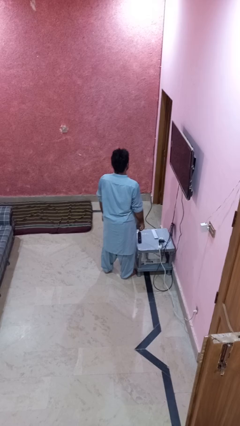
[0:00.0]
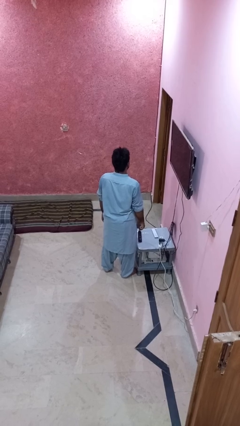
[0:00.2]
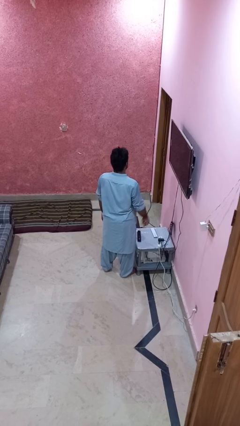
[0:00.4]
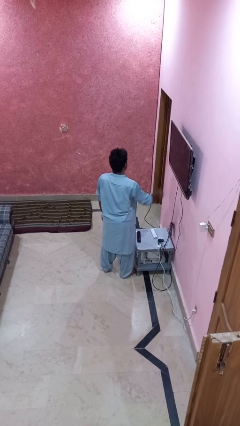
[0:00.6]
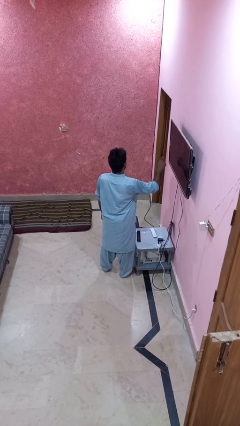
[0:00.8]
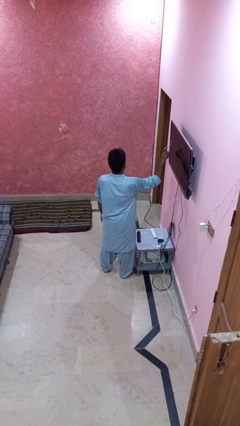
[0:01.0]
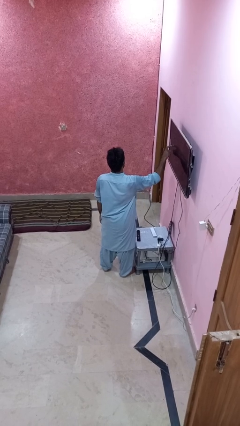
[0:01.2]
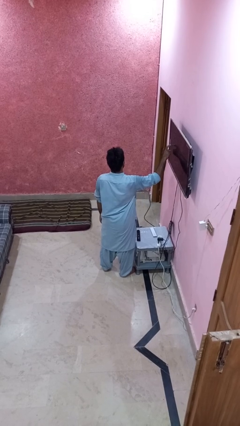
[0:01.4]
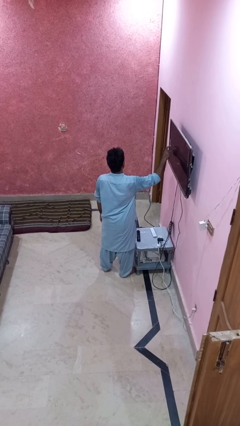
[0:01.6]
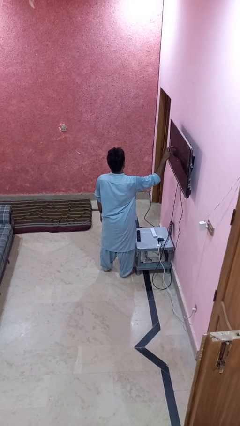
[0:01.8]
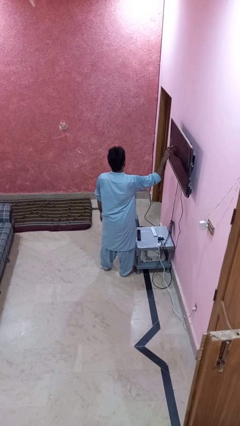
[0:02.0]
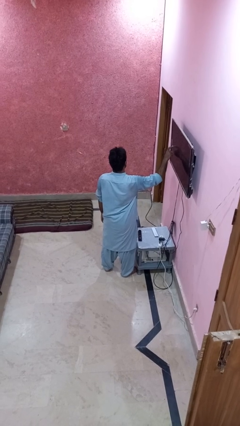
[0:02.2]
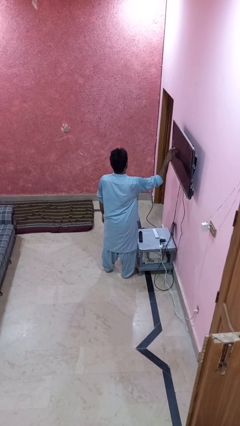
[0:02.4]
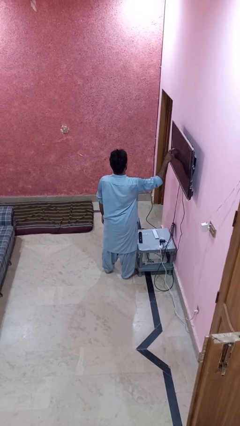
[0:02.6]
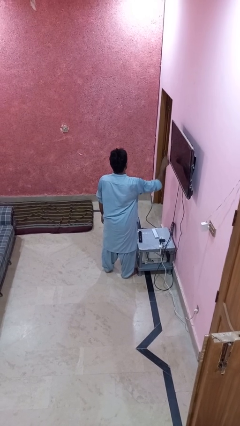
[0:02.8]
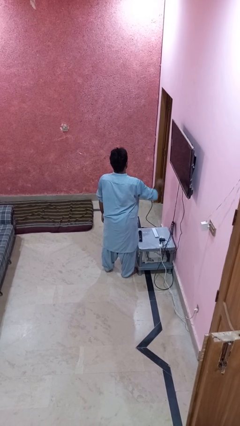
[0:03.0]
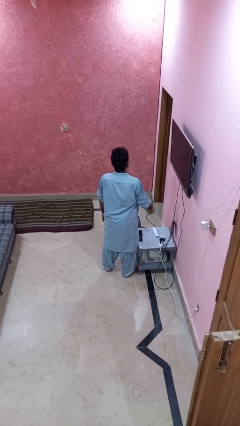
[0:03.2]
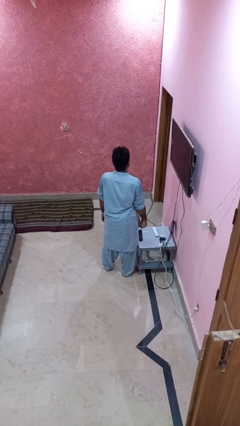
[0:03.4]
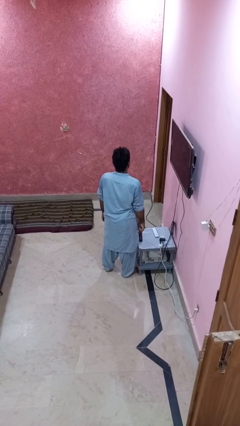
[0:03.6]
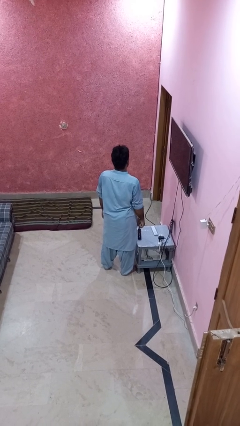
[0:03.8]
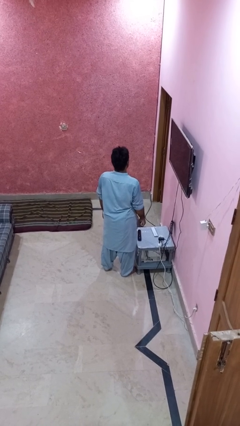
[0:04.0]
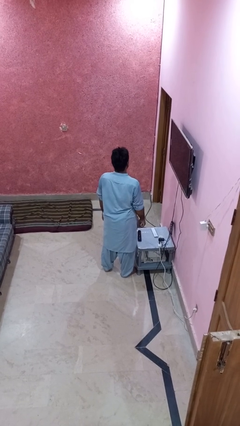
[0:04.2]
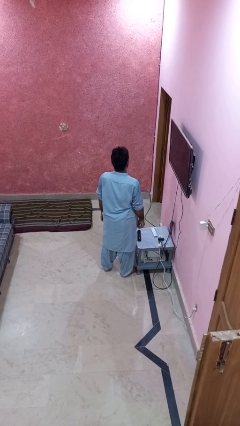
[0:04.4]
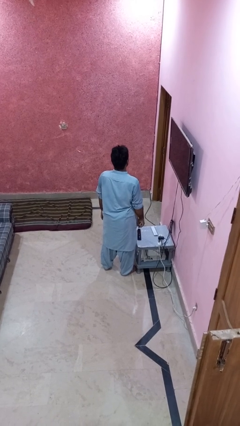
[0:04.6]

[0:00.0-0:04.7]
person taps object with finger

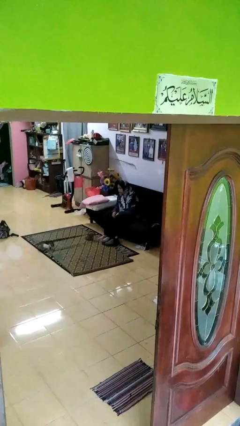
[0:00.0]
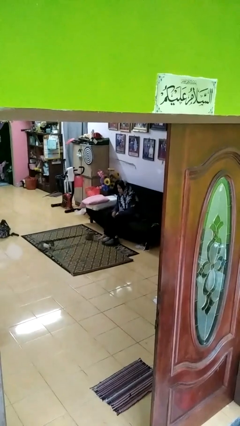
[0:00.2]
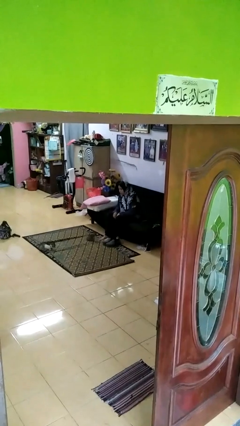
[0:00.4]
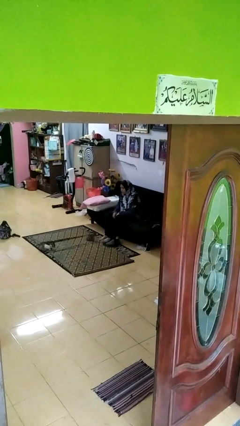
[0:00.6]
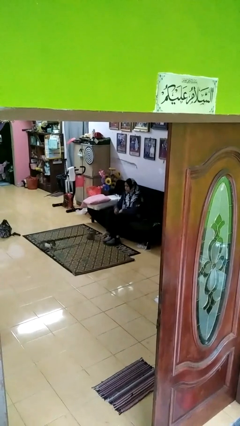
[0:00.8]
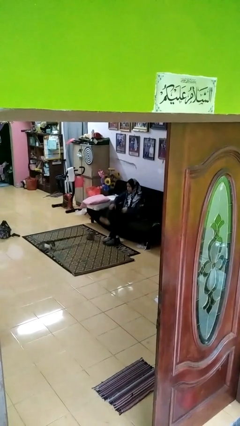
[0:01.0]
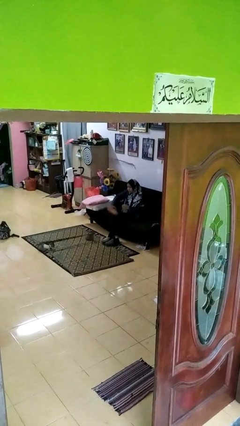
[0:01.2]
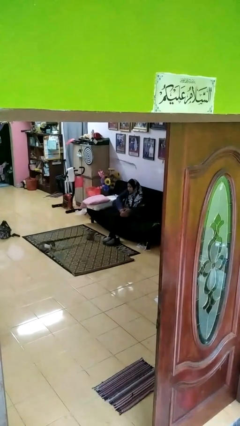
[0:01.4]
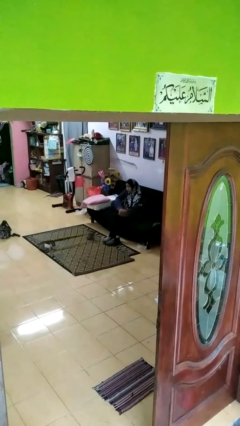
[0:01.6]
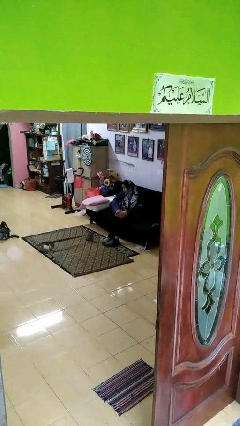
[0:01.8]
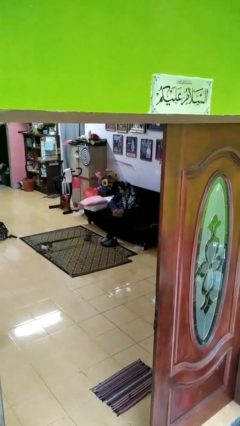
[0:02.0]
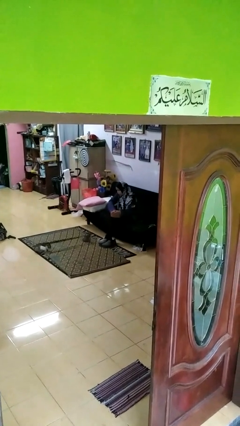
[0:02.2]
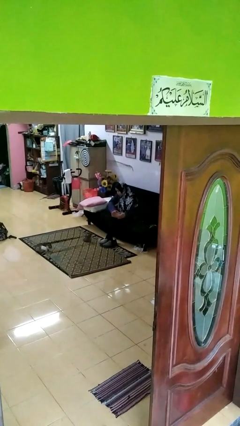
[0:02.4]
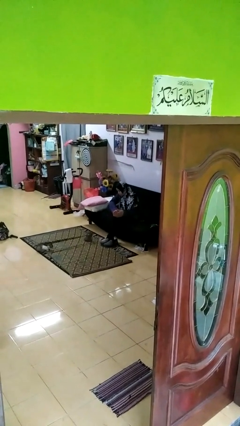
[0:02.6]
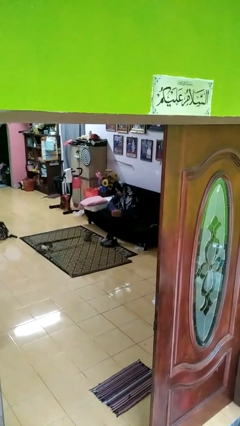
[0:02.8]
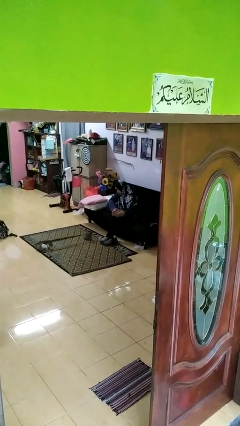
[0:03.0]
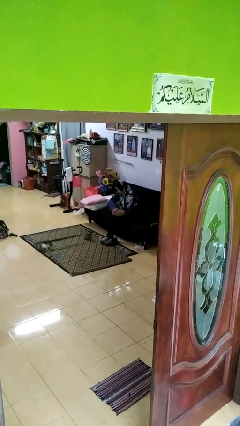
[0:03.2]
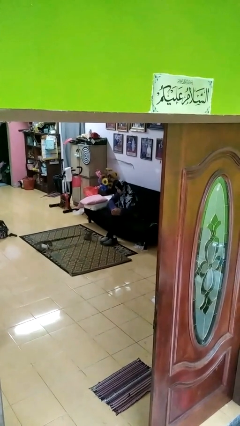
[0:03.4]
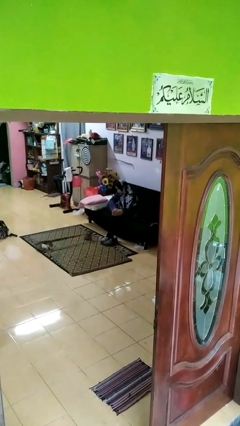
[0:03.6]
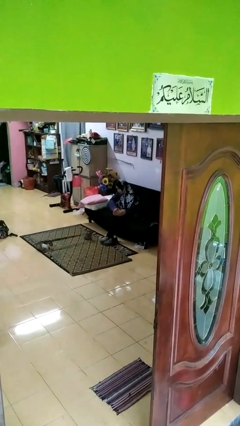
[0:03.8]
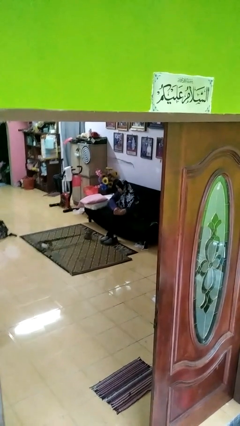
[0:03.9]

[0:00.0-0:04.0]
person rubs foot

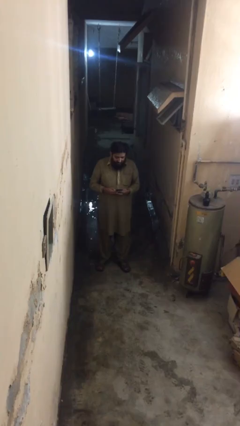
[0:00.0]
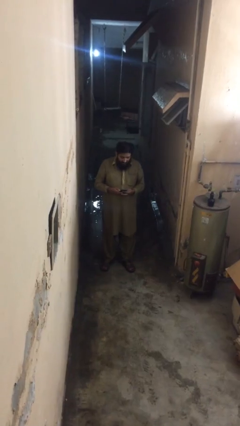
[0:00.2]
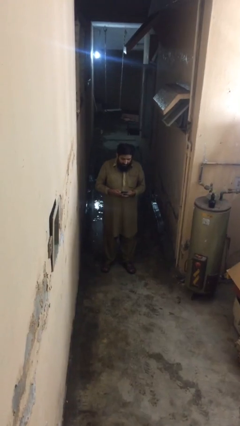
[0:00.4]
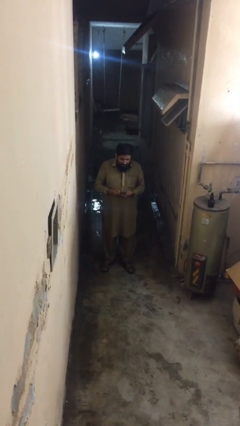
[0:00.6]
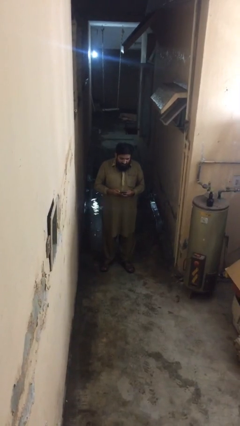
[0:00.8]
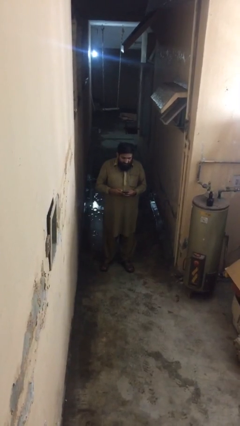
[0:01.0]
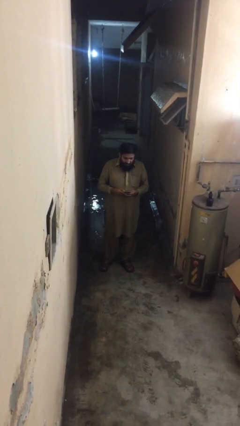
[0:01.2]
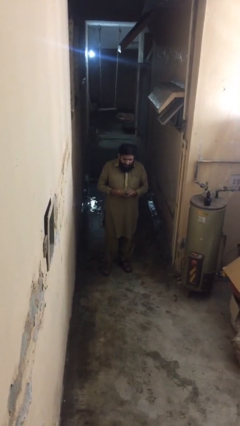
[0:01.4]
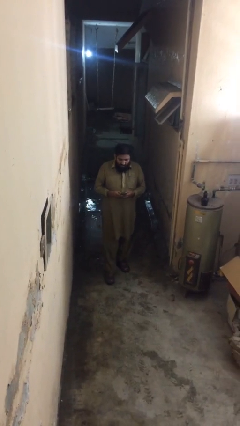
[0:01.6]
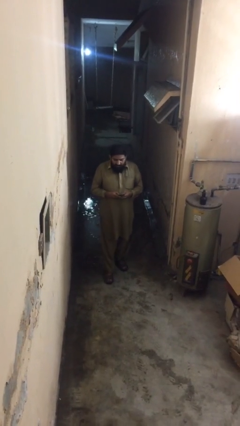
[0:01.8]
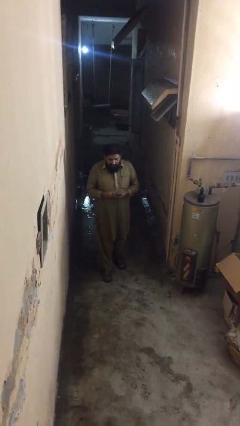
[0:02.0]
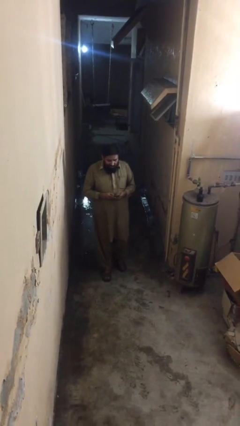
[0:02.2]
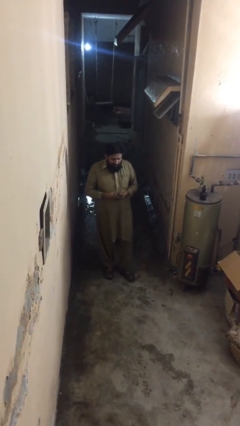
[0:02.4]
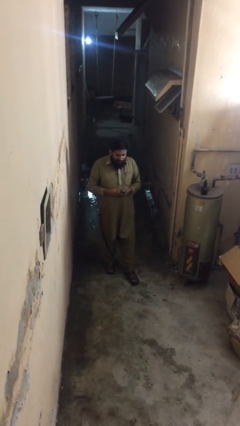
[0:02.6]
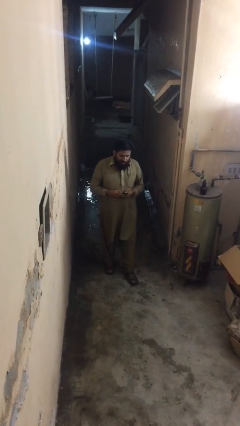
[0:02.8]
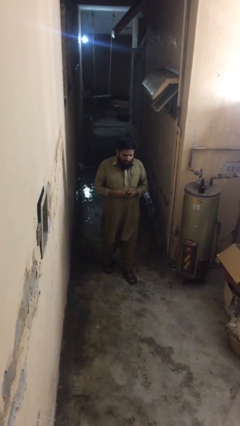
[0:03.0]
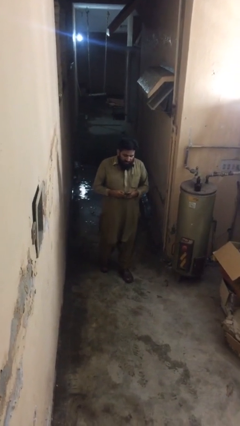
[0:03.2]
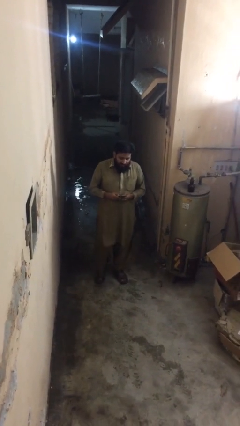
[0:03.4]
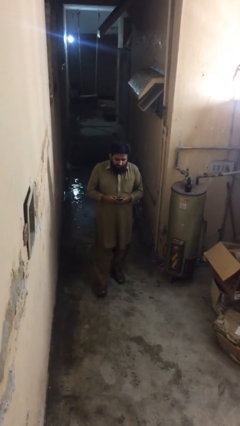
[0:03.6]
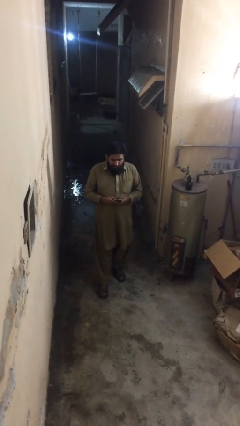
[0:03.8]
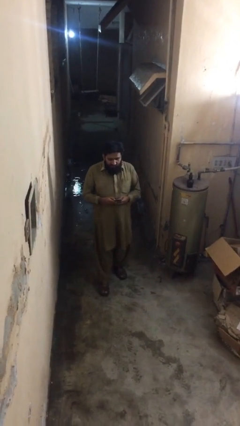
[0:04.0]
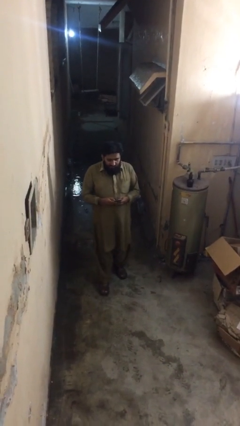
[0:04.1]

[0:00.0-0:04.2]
person texts on phone

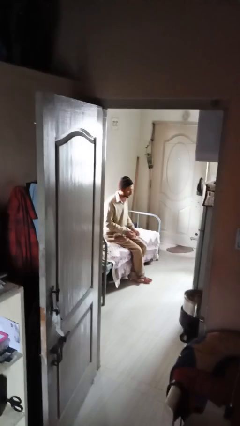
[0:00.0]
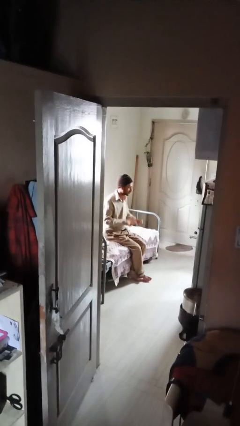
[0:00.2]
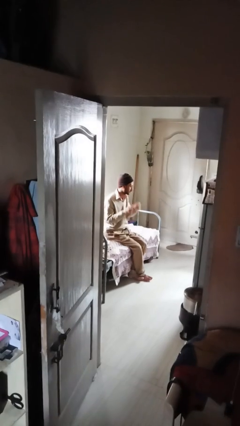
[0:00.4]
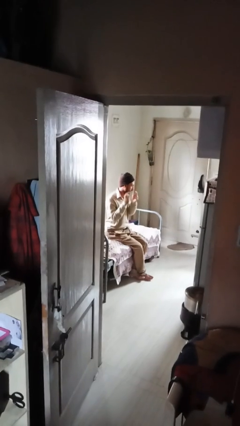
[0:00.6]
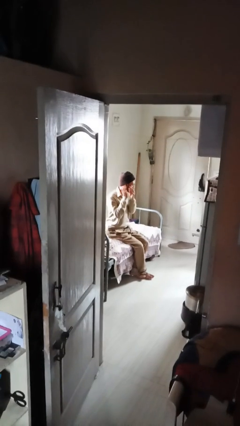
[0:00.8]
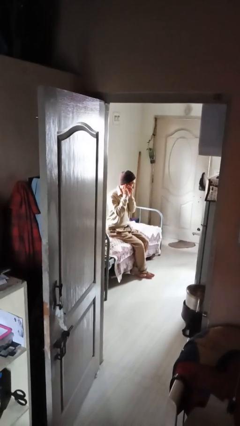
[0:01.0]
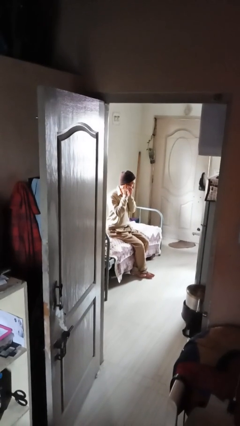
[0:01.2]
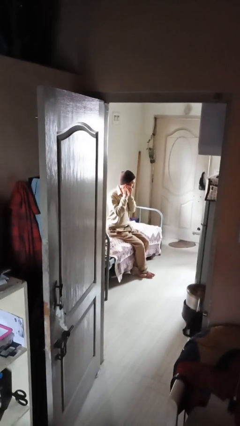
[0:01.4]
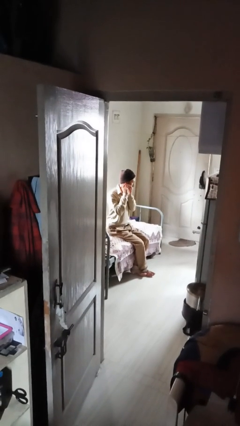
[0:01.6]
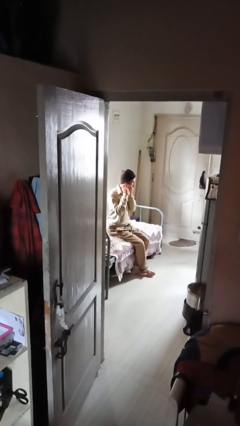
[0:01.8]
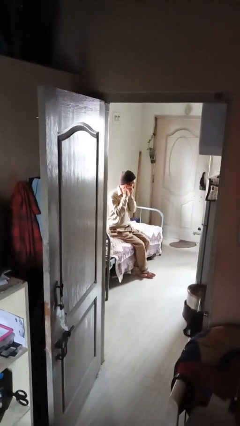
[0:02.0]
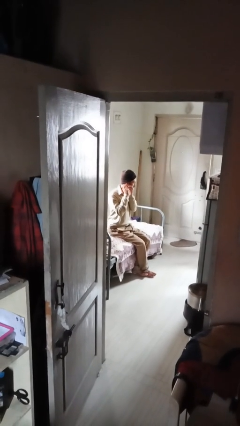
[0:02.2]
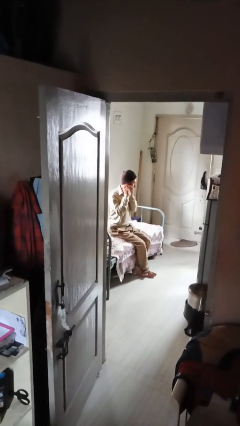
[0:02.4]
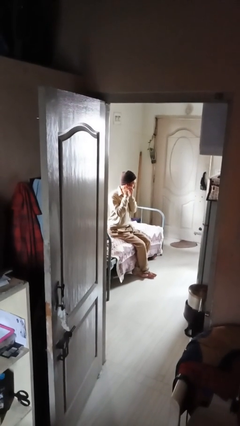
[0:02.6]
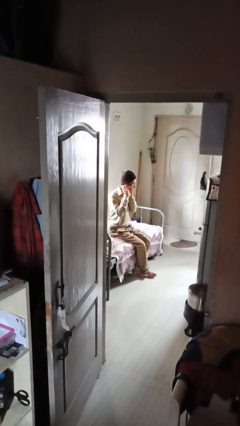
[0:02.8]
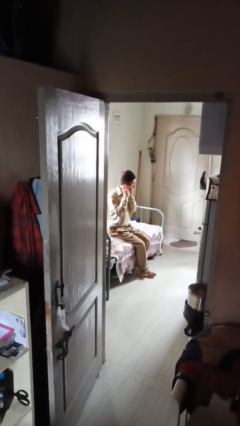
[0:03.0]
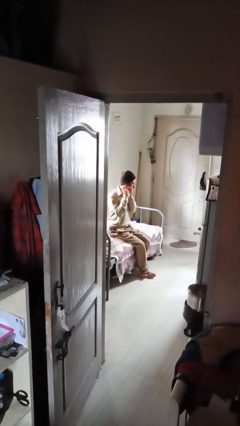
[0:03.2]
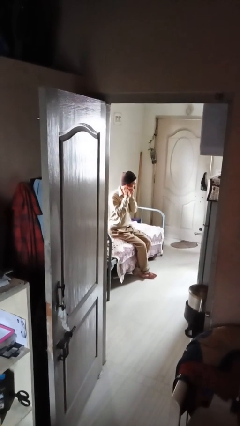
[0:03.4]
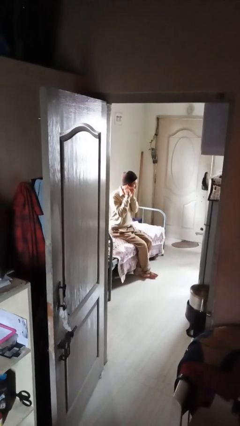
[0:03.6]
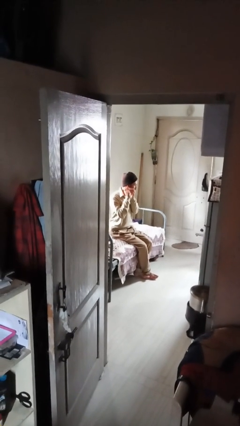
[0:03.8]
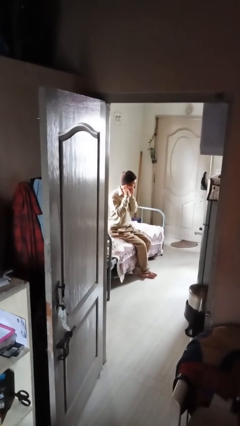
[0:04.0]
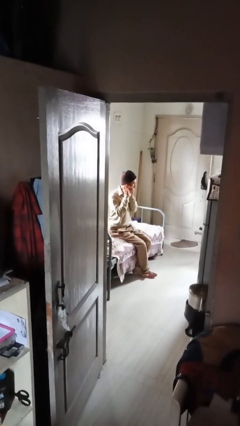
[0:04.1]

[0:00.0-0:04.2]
person puts on earrings

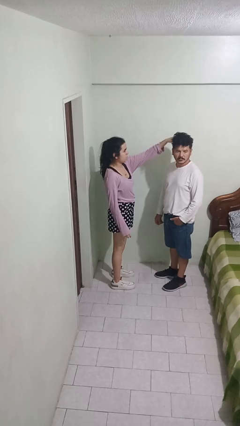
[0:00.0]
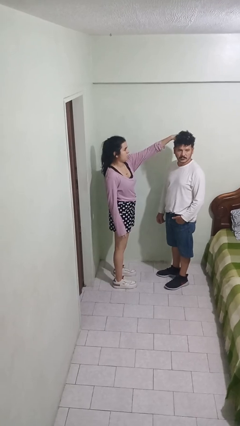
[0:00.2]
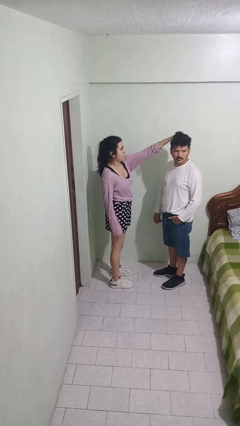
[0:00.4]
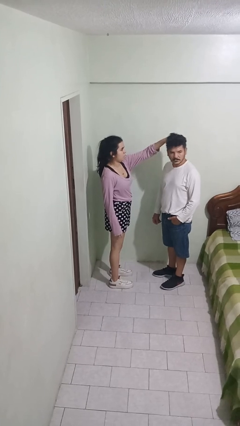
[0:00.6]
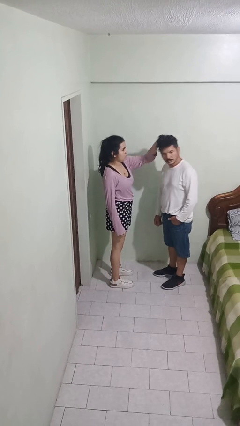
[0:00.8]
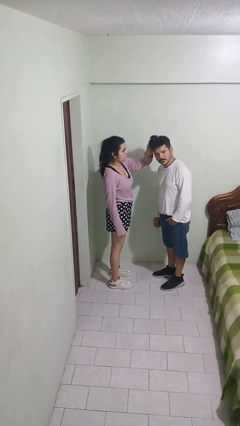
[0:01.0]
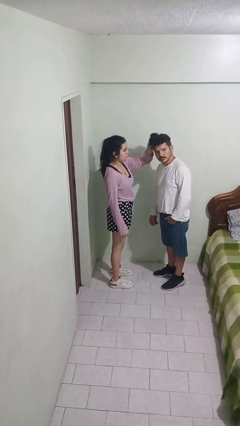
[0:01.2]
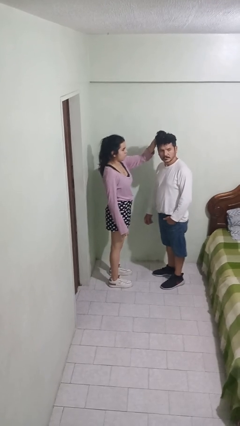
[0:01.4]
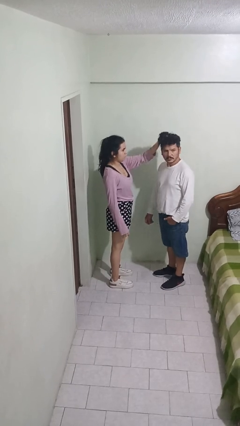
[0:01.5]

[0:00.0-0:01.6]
person grabs person by hair
